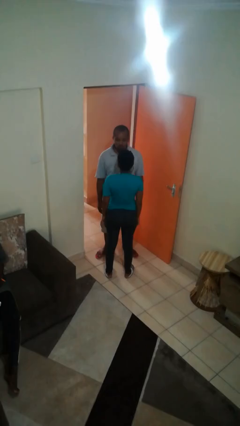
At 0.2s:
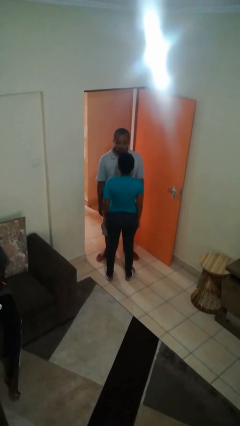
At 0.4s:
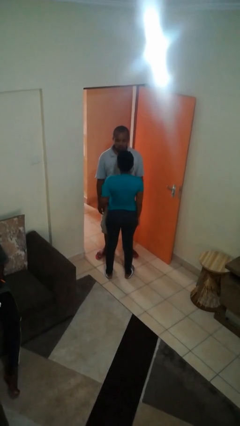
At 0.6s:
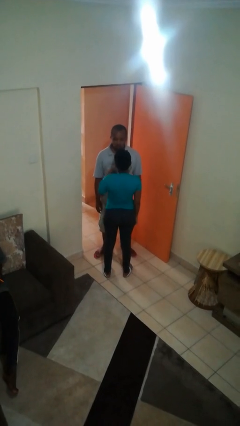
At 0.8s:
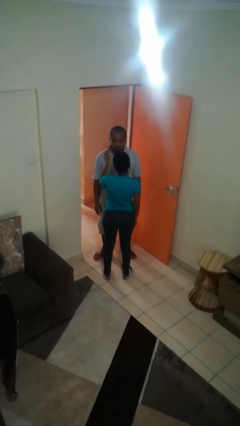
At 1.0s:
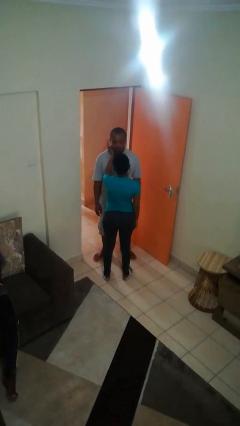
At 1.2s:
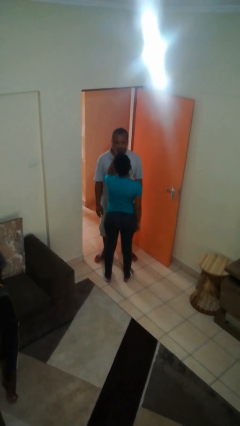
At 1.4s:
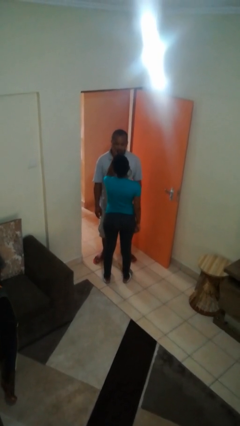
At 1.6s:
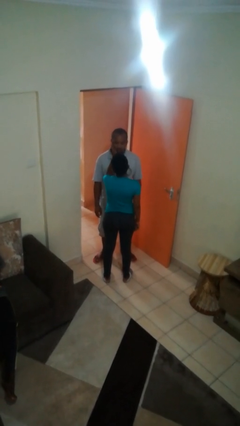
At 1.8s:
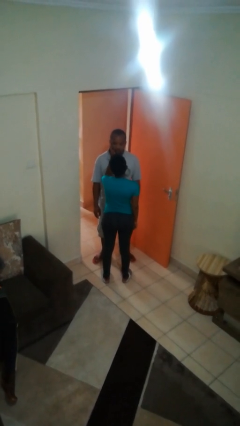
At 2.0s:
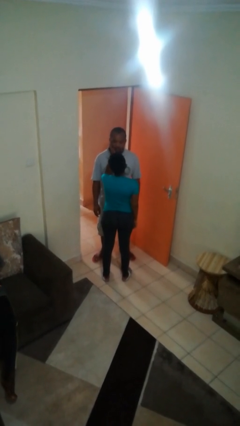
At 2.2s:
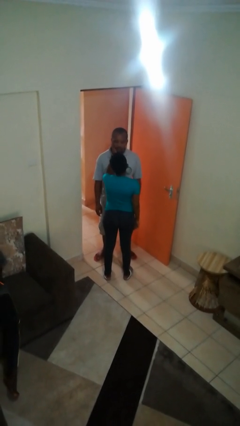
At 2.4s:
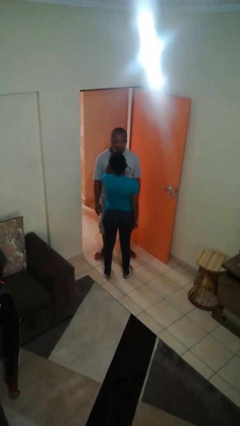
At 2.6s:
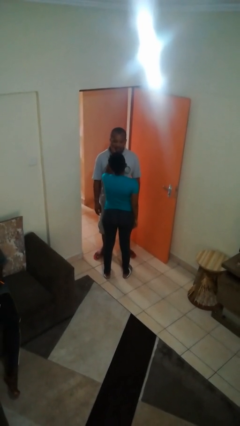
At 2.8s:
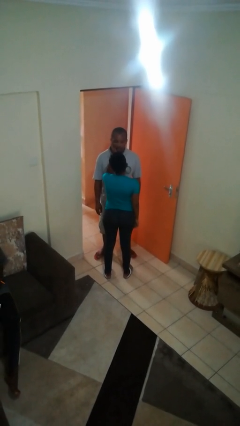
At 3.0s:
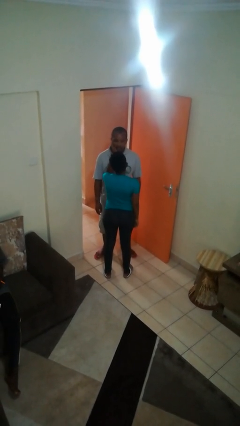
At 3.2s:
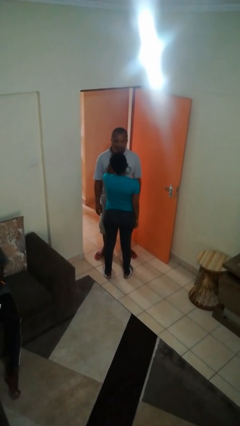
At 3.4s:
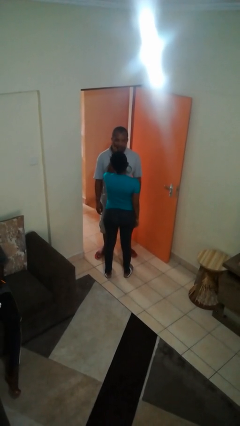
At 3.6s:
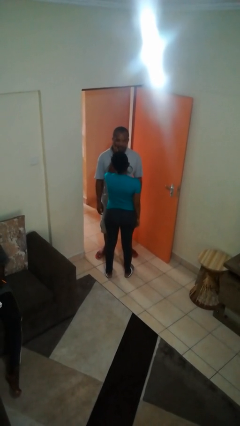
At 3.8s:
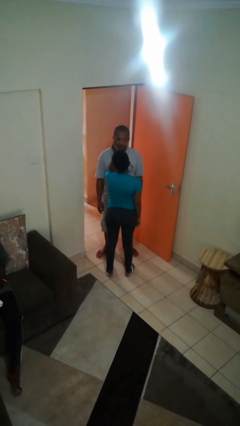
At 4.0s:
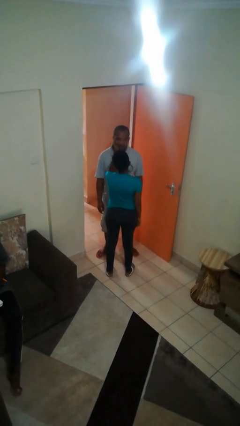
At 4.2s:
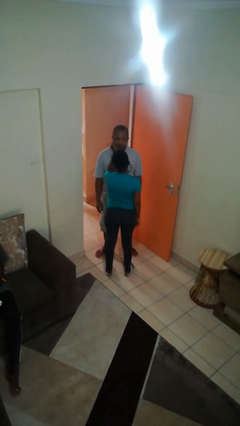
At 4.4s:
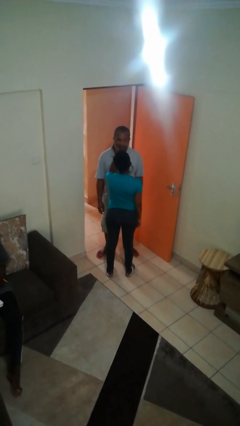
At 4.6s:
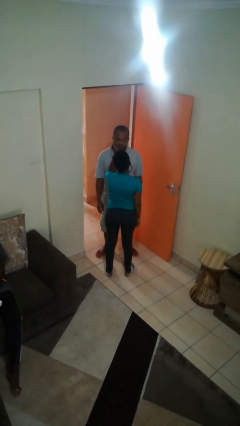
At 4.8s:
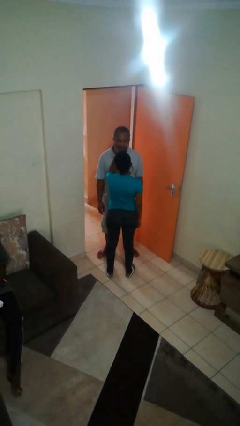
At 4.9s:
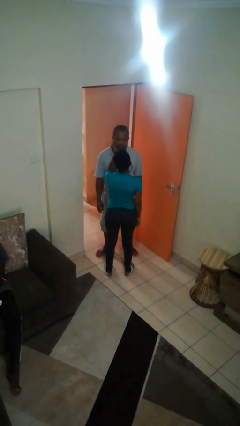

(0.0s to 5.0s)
person touches face of person

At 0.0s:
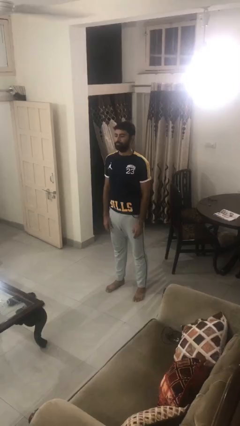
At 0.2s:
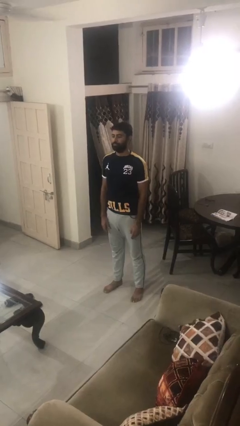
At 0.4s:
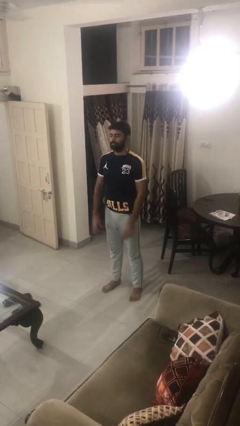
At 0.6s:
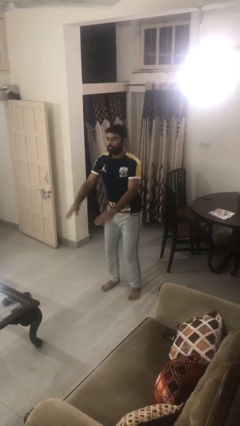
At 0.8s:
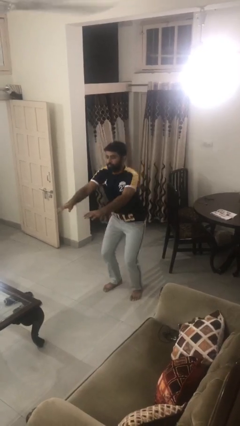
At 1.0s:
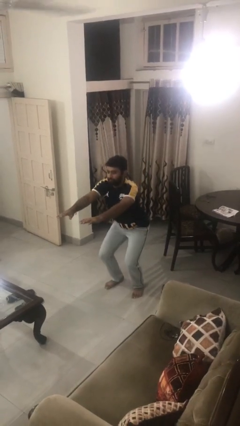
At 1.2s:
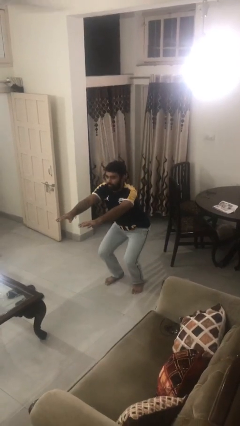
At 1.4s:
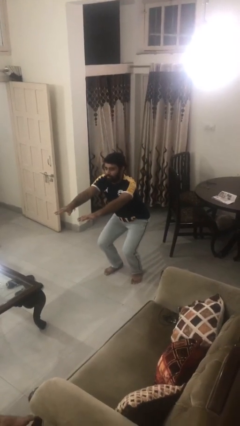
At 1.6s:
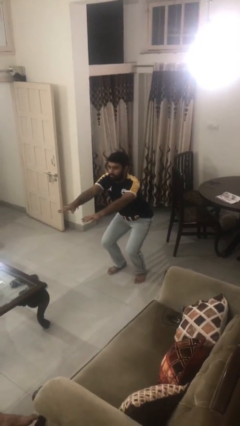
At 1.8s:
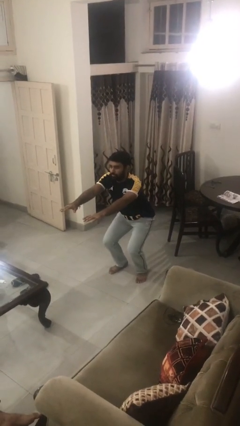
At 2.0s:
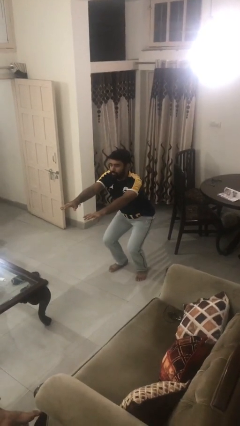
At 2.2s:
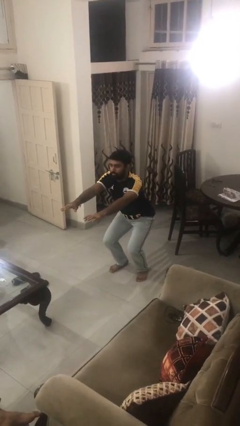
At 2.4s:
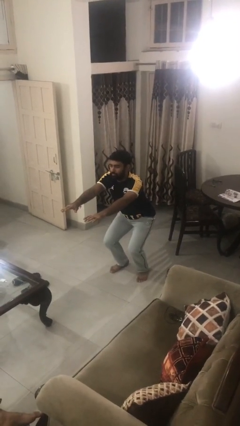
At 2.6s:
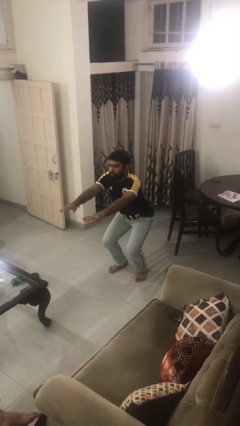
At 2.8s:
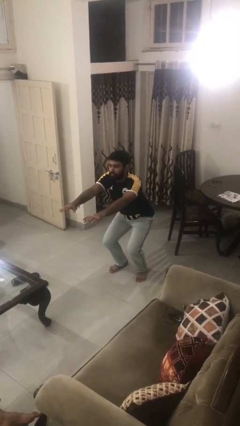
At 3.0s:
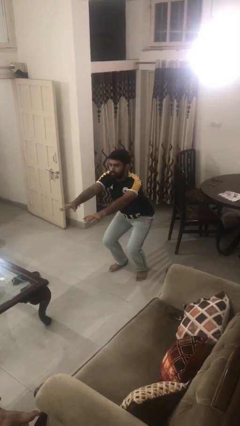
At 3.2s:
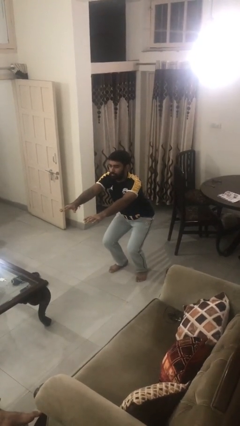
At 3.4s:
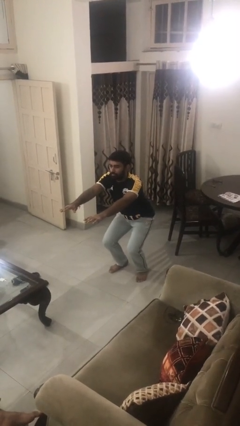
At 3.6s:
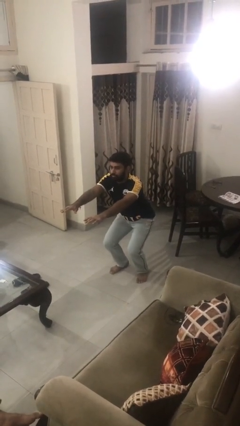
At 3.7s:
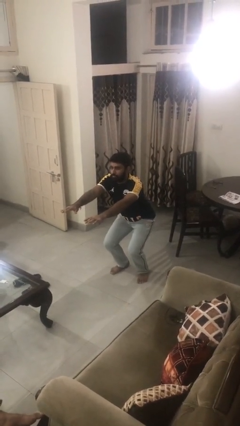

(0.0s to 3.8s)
person squats

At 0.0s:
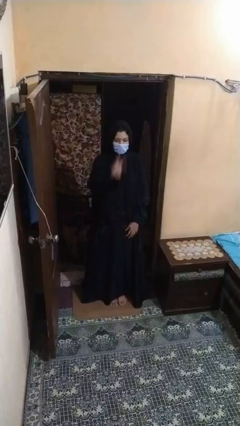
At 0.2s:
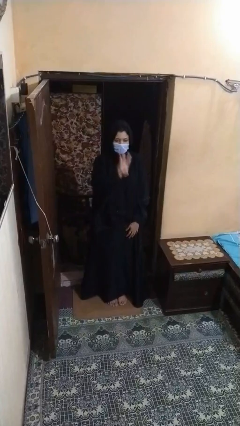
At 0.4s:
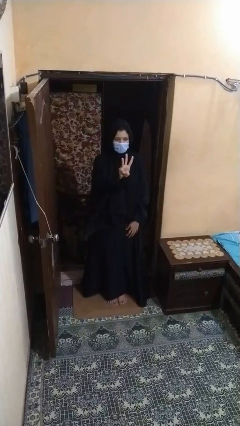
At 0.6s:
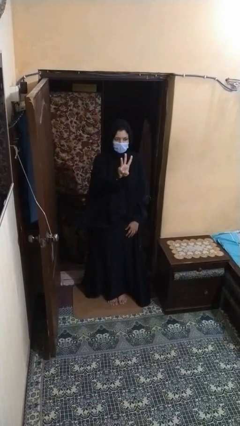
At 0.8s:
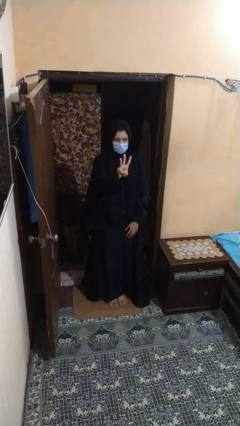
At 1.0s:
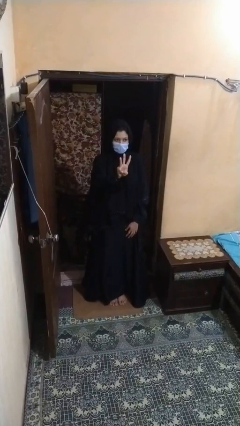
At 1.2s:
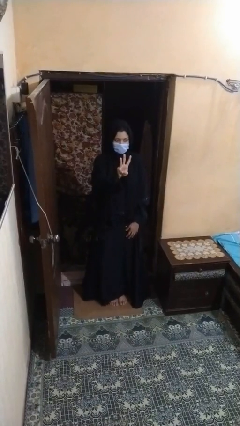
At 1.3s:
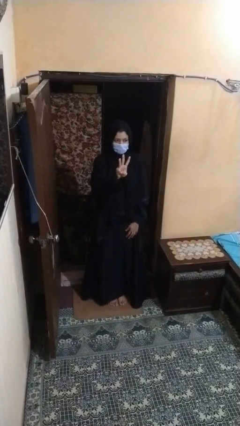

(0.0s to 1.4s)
person gestures number three

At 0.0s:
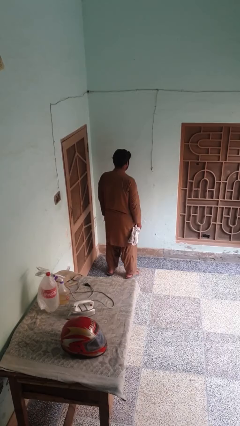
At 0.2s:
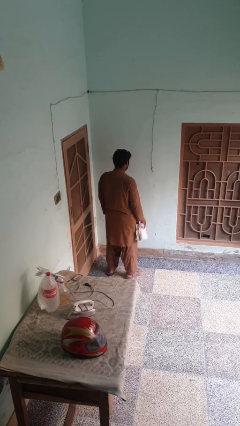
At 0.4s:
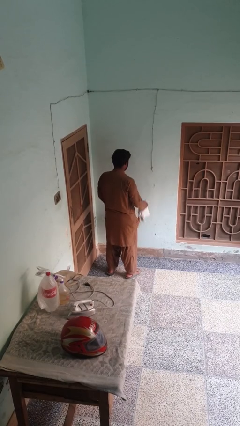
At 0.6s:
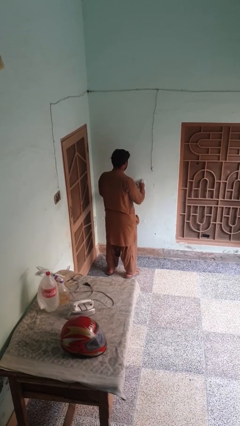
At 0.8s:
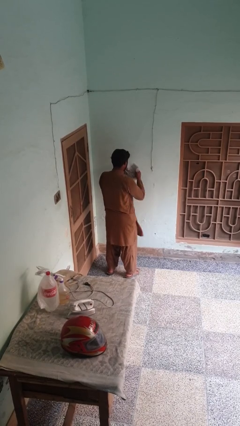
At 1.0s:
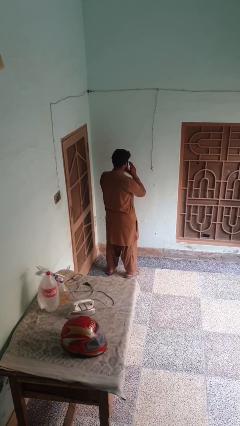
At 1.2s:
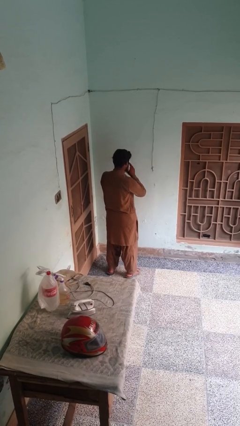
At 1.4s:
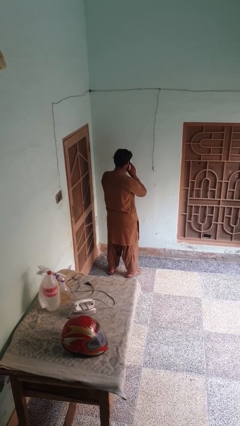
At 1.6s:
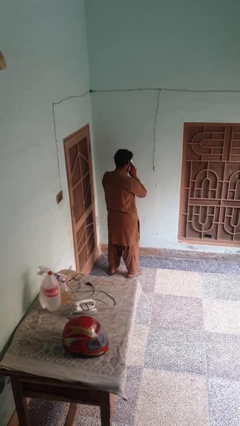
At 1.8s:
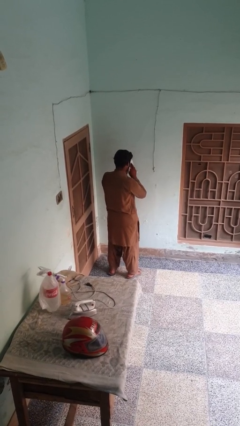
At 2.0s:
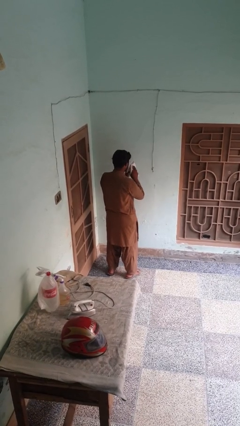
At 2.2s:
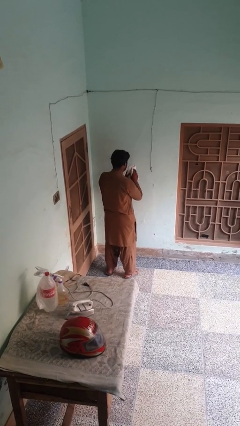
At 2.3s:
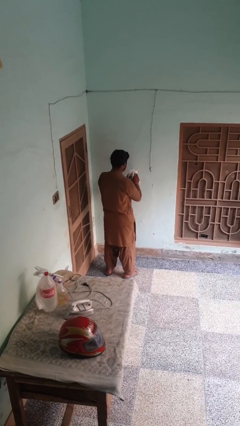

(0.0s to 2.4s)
person blows nose

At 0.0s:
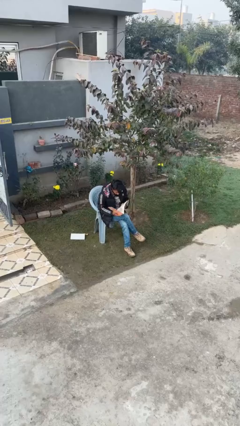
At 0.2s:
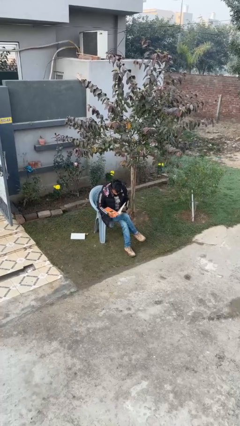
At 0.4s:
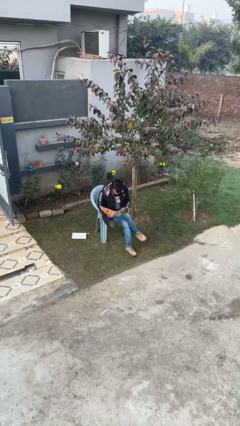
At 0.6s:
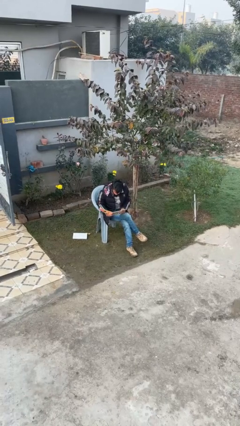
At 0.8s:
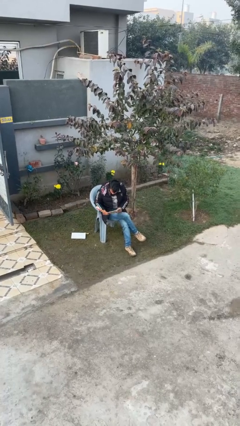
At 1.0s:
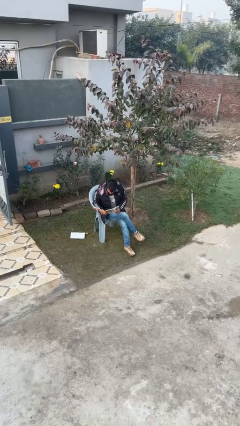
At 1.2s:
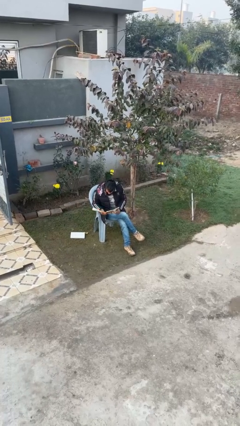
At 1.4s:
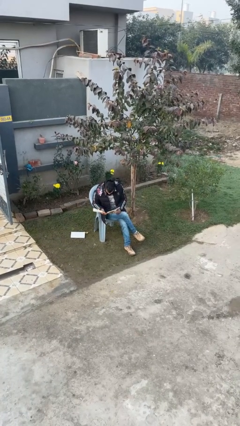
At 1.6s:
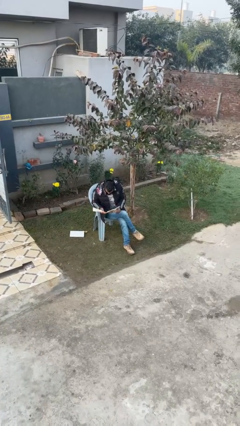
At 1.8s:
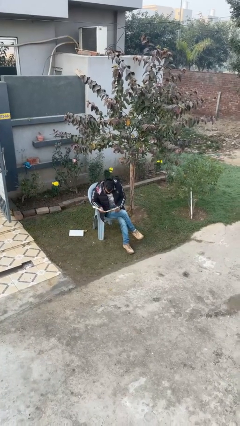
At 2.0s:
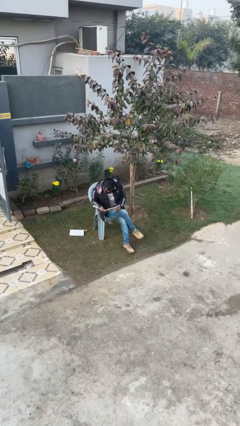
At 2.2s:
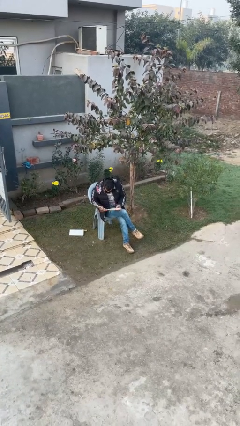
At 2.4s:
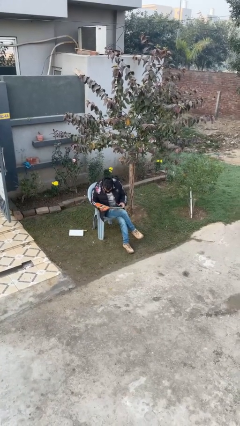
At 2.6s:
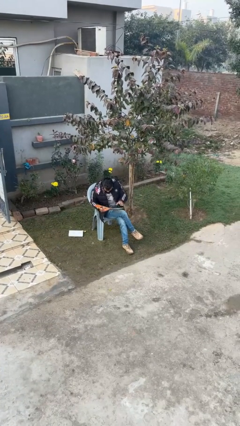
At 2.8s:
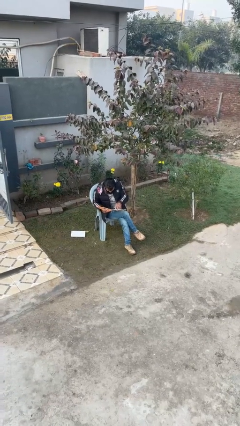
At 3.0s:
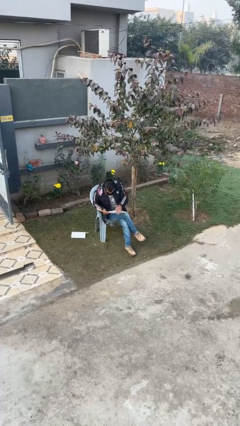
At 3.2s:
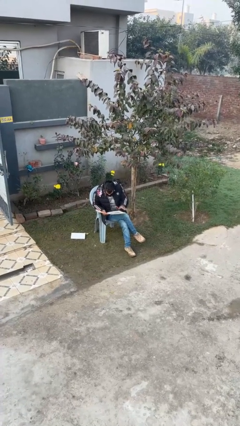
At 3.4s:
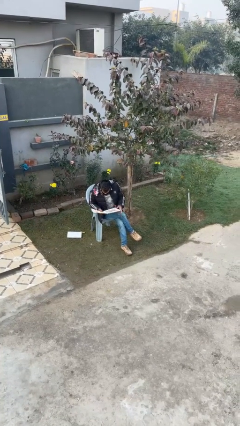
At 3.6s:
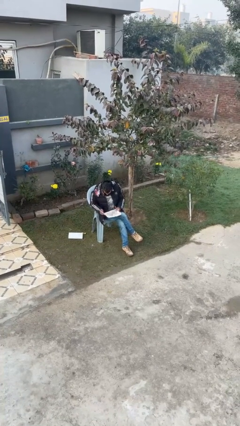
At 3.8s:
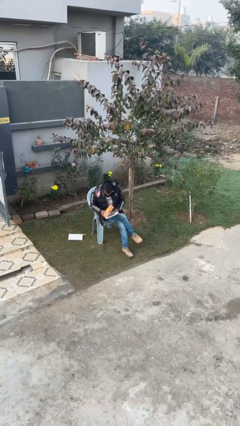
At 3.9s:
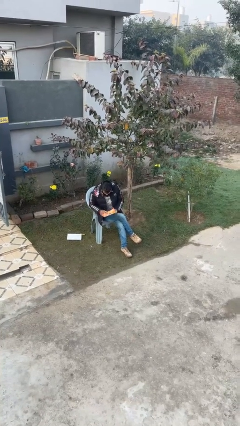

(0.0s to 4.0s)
person reads document

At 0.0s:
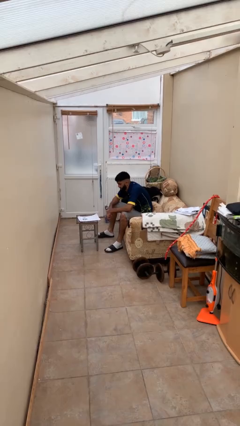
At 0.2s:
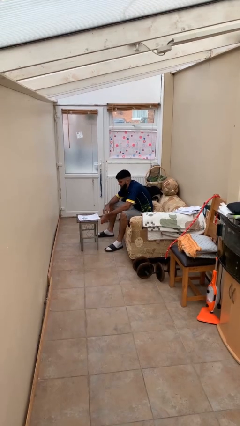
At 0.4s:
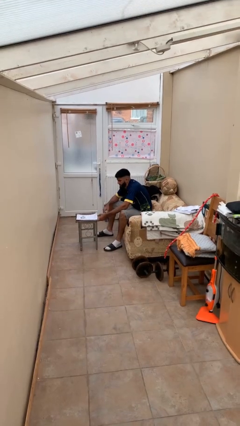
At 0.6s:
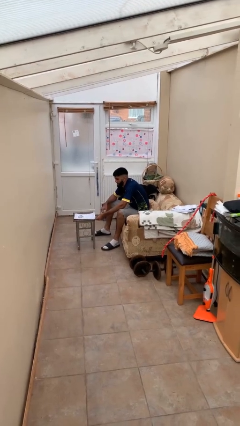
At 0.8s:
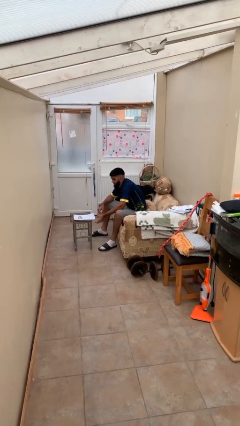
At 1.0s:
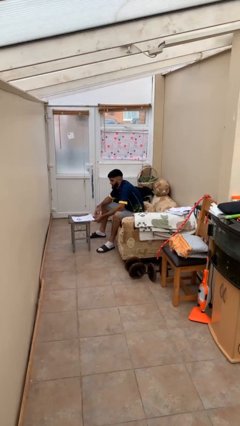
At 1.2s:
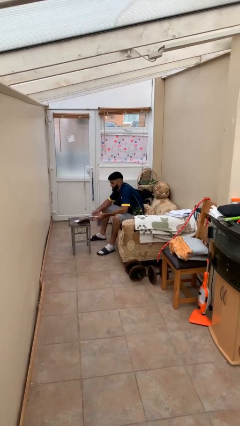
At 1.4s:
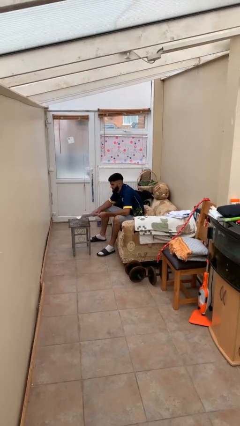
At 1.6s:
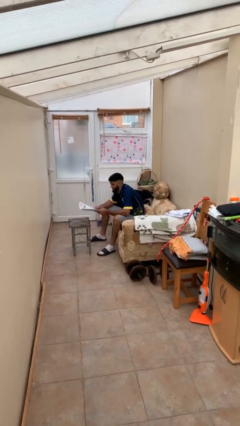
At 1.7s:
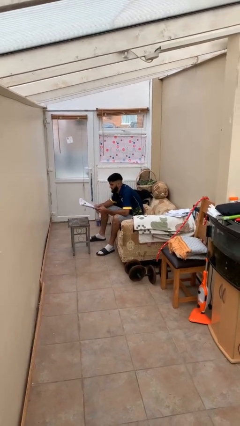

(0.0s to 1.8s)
person picks up object from table
